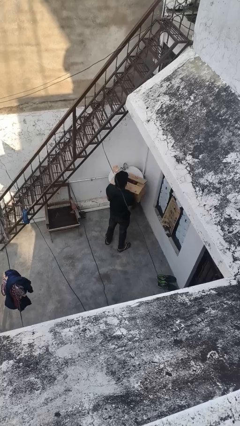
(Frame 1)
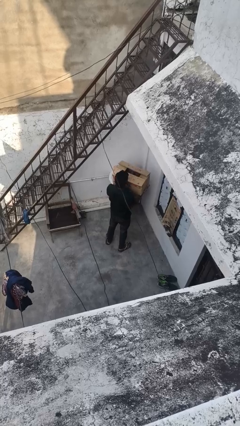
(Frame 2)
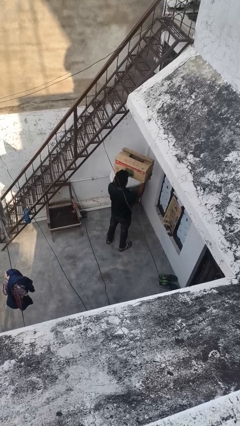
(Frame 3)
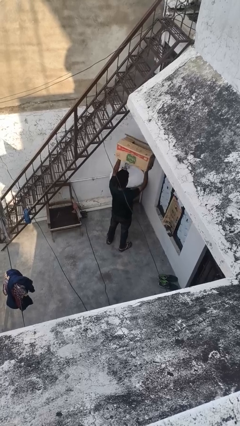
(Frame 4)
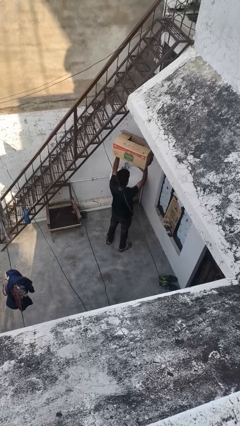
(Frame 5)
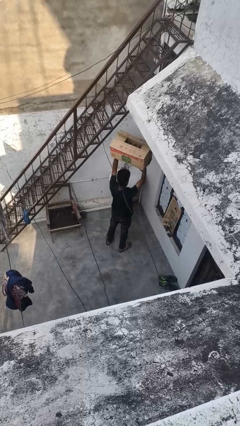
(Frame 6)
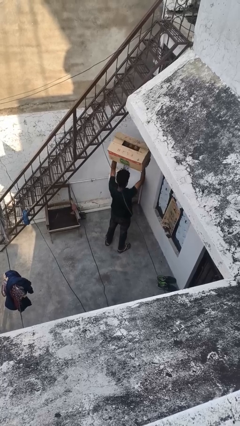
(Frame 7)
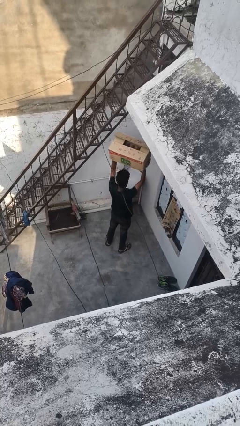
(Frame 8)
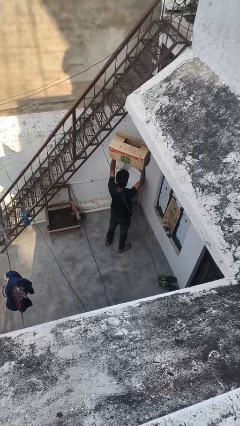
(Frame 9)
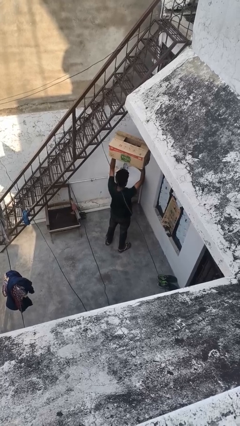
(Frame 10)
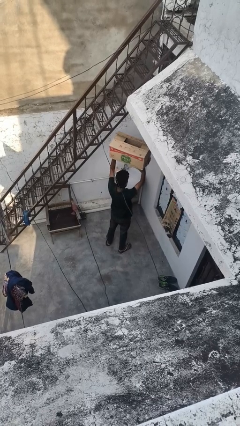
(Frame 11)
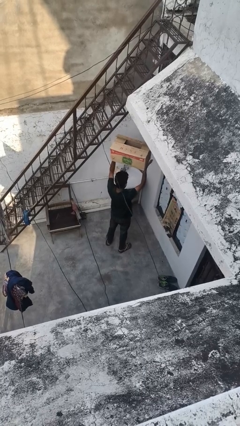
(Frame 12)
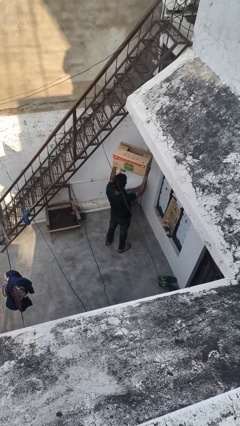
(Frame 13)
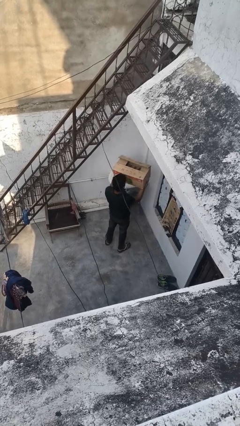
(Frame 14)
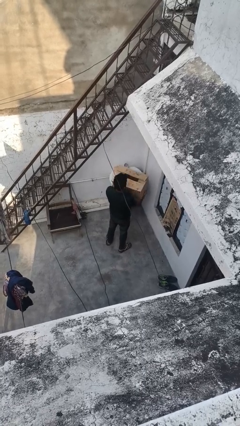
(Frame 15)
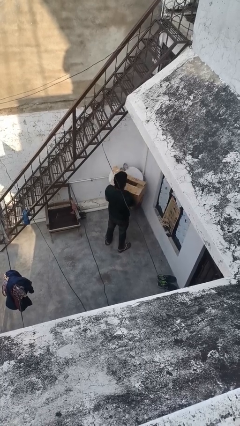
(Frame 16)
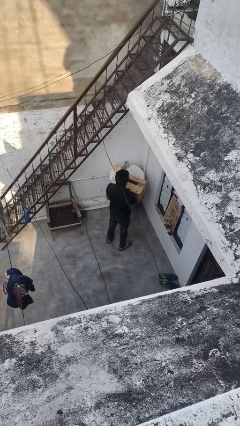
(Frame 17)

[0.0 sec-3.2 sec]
person holds object above head

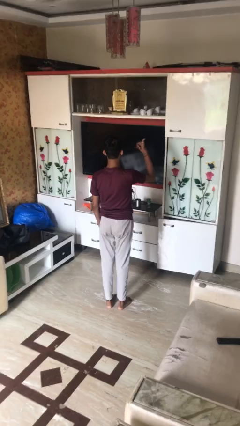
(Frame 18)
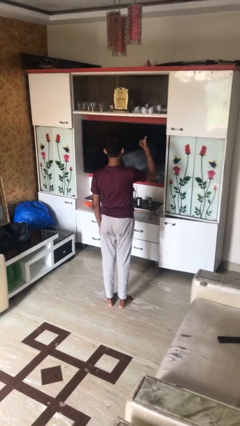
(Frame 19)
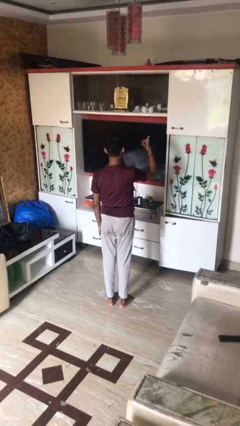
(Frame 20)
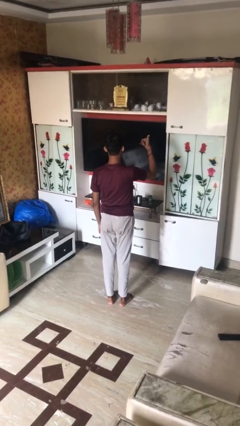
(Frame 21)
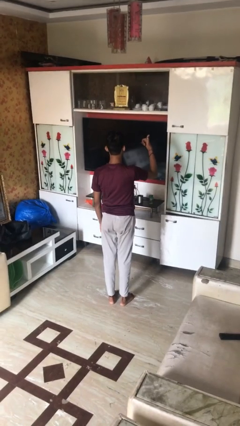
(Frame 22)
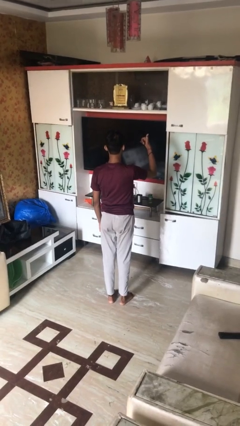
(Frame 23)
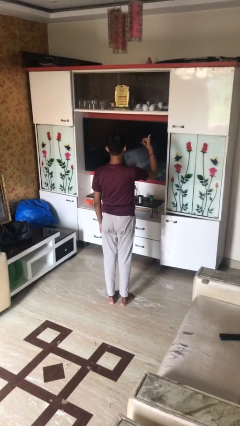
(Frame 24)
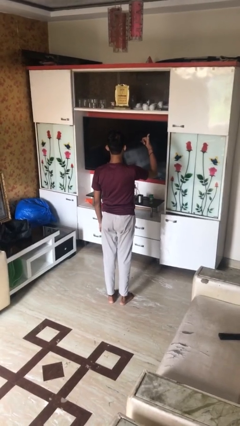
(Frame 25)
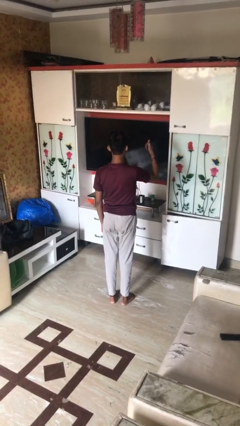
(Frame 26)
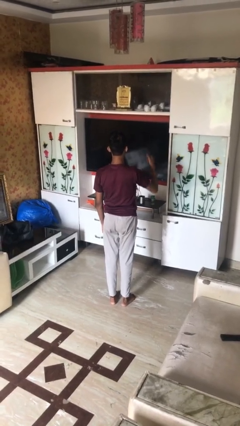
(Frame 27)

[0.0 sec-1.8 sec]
person gestures hang loose

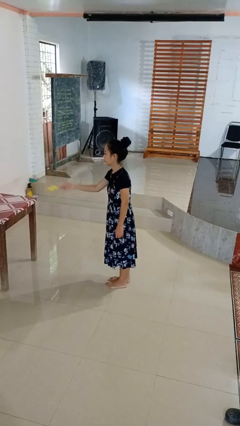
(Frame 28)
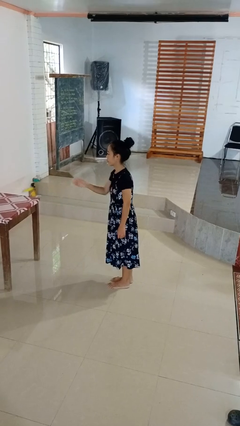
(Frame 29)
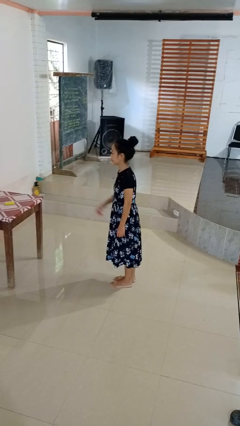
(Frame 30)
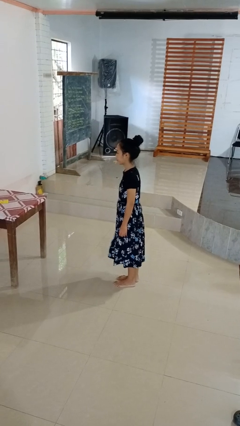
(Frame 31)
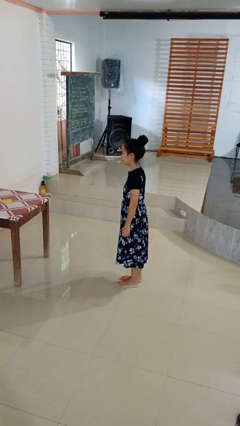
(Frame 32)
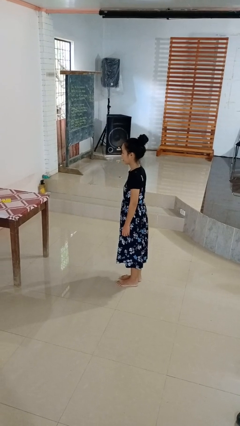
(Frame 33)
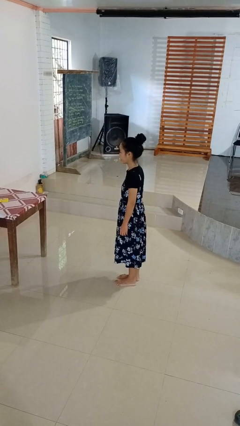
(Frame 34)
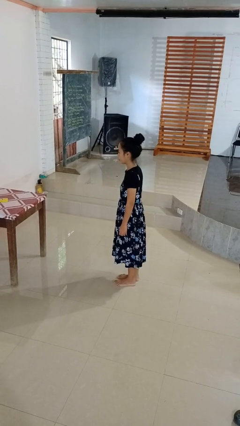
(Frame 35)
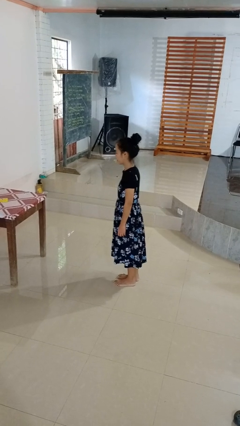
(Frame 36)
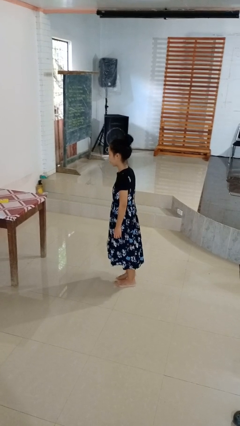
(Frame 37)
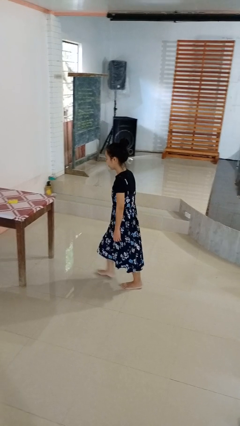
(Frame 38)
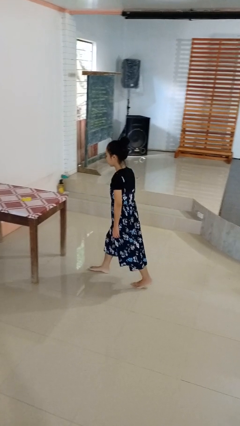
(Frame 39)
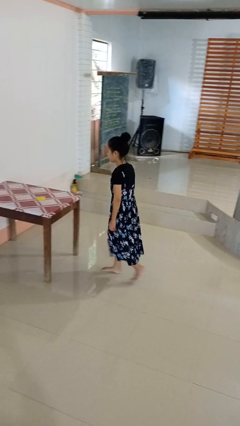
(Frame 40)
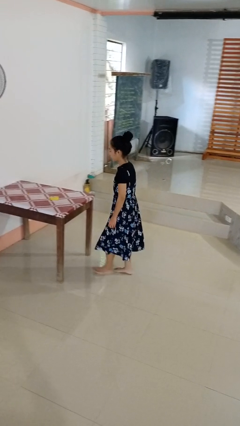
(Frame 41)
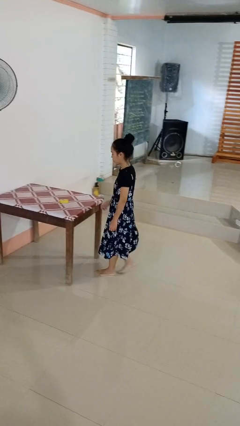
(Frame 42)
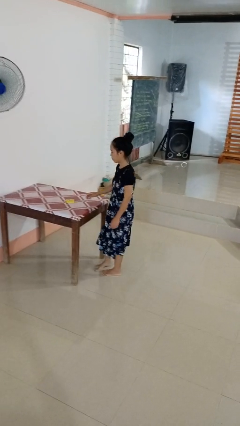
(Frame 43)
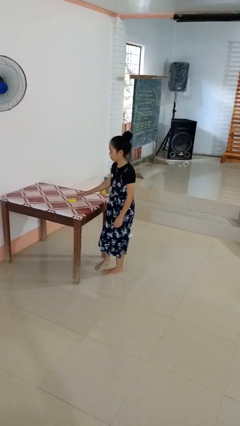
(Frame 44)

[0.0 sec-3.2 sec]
person throws object on table

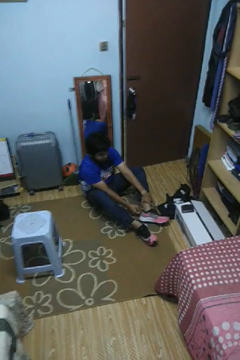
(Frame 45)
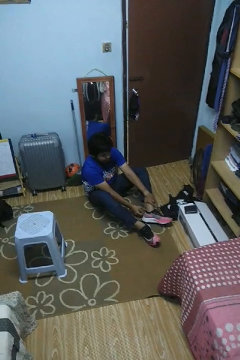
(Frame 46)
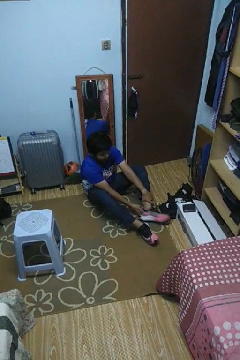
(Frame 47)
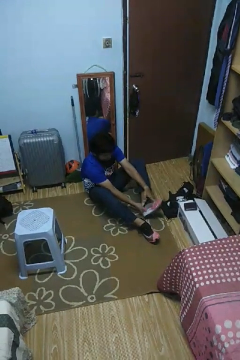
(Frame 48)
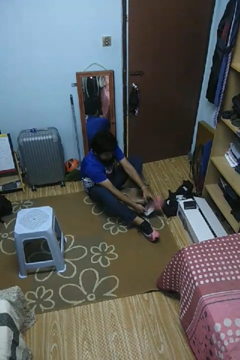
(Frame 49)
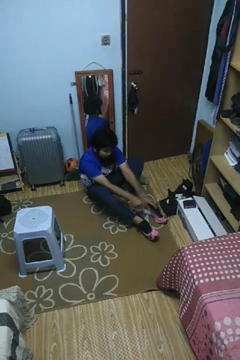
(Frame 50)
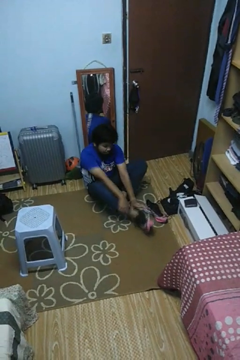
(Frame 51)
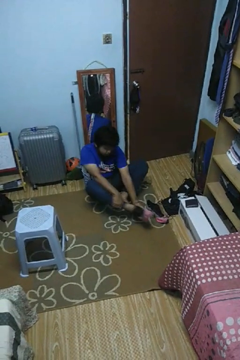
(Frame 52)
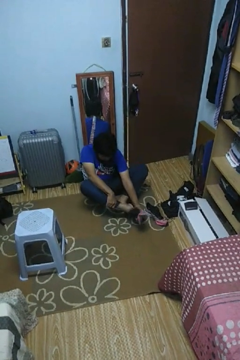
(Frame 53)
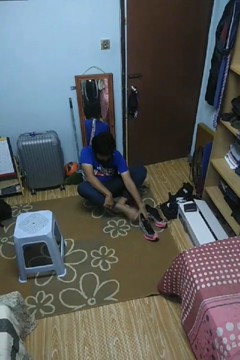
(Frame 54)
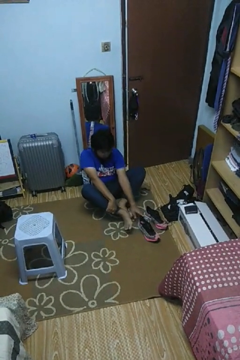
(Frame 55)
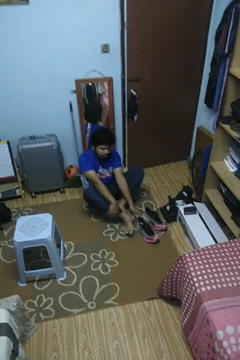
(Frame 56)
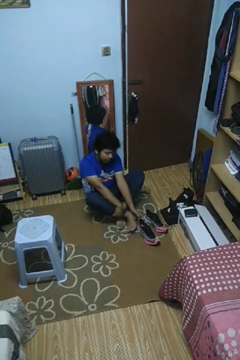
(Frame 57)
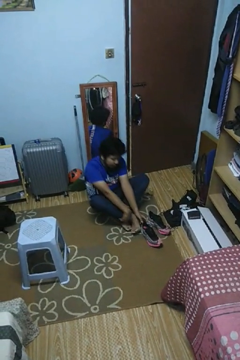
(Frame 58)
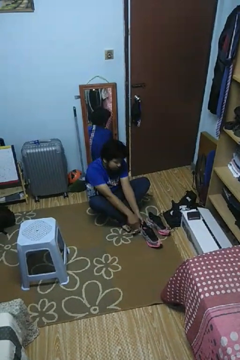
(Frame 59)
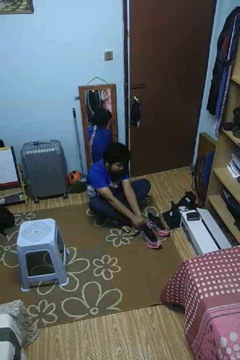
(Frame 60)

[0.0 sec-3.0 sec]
person takes off shoes

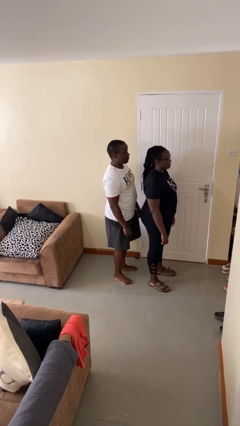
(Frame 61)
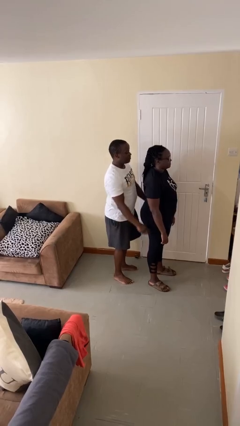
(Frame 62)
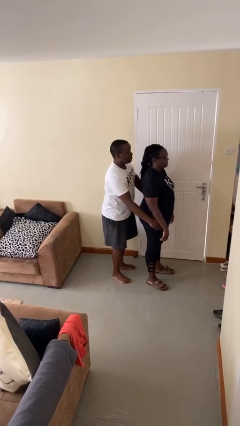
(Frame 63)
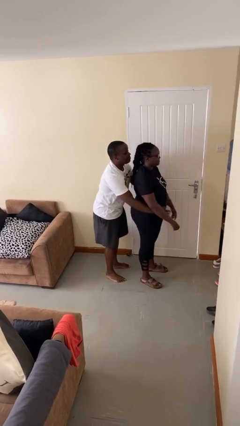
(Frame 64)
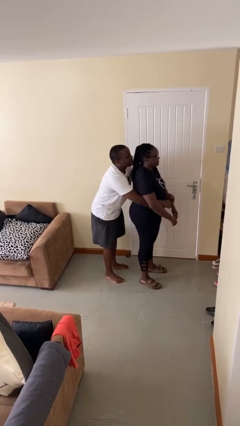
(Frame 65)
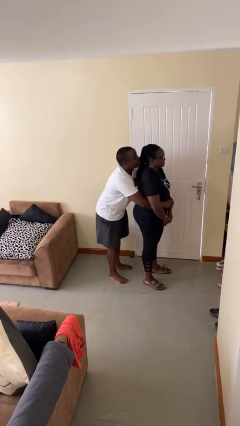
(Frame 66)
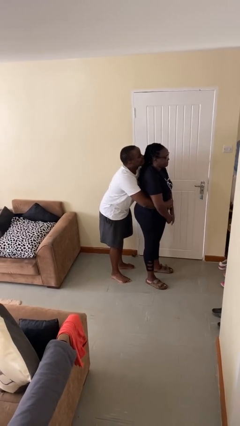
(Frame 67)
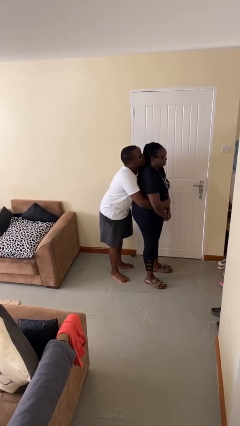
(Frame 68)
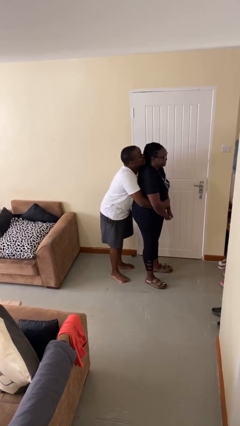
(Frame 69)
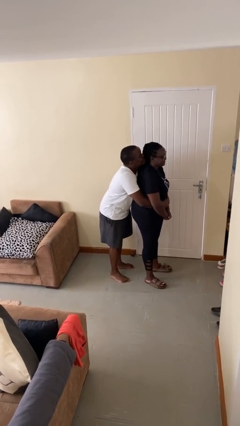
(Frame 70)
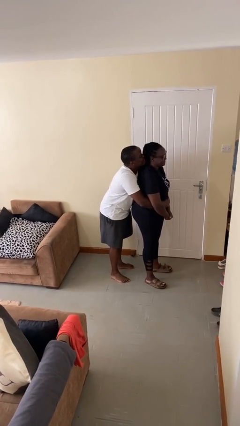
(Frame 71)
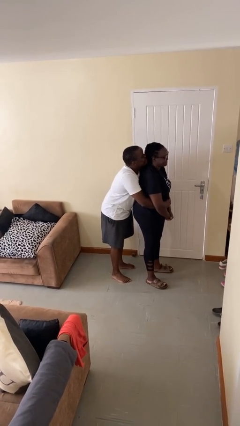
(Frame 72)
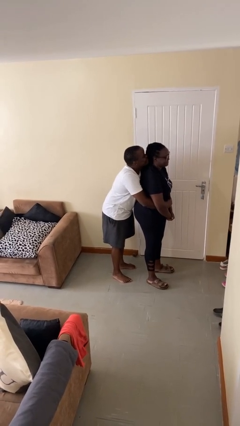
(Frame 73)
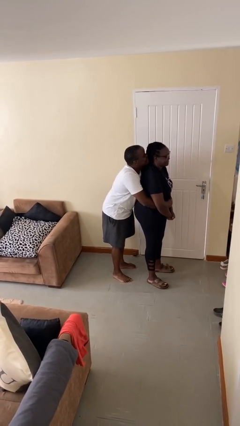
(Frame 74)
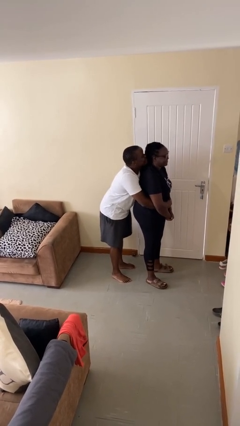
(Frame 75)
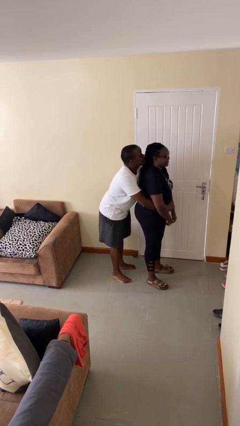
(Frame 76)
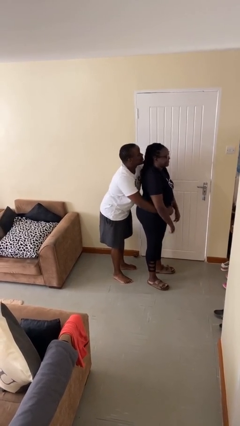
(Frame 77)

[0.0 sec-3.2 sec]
person hugs person from behind

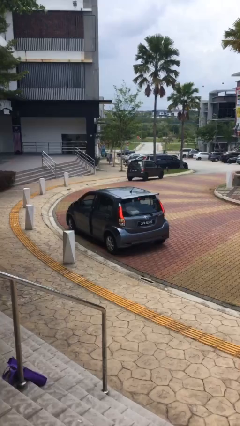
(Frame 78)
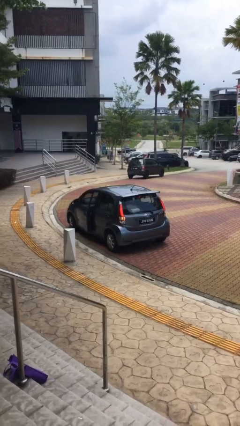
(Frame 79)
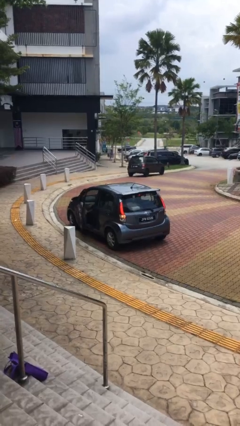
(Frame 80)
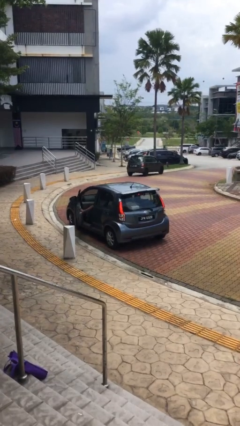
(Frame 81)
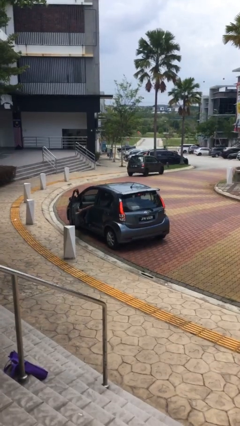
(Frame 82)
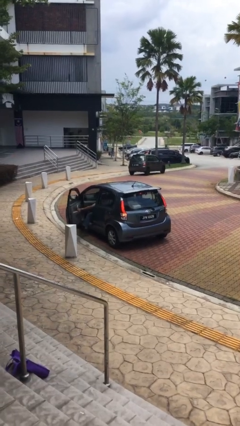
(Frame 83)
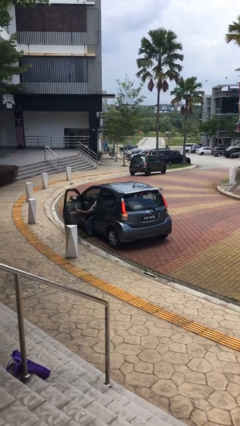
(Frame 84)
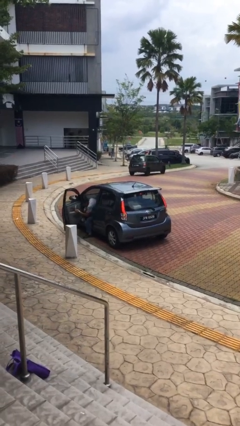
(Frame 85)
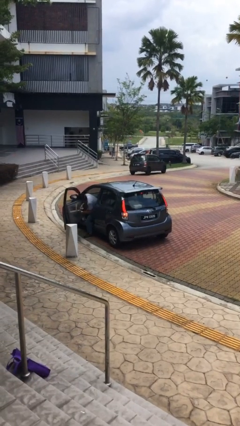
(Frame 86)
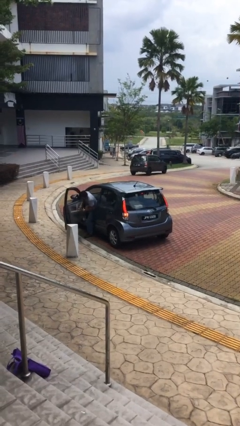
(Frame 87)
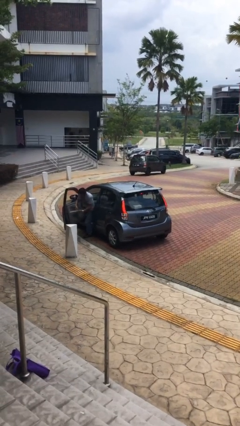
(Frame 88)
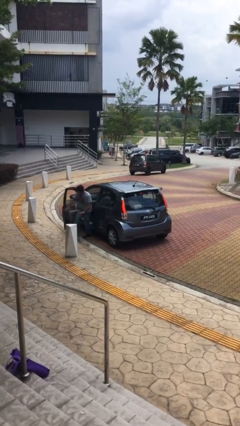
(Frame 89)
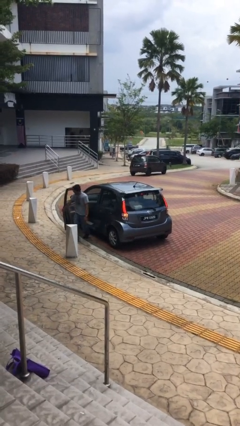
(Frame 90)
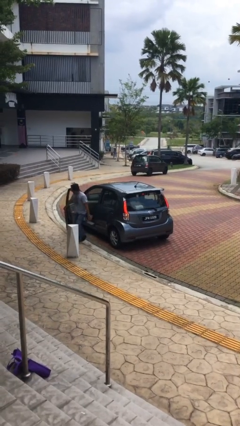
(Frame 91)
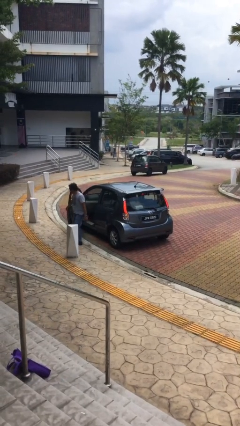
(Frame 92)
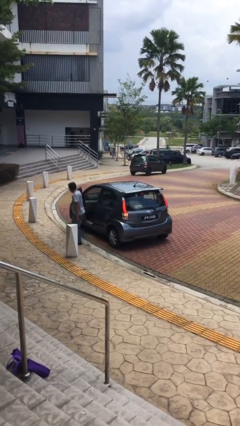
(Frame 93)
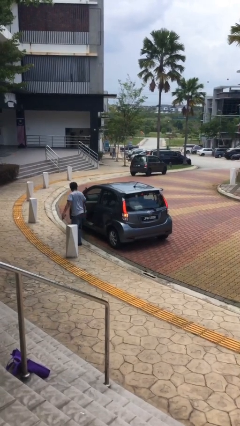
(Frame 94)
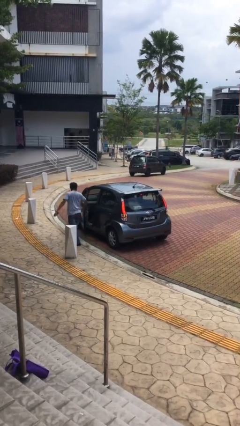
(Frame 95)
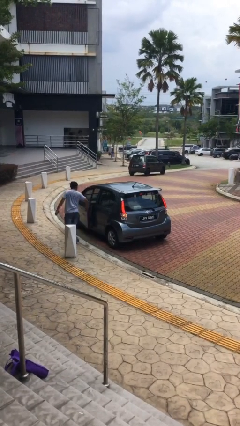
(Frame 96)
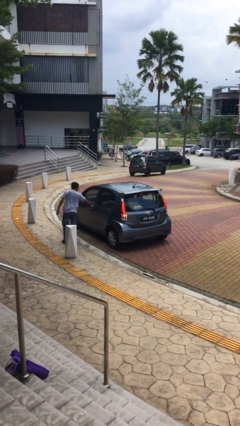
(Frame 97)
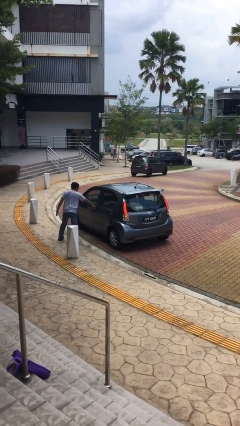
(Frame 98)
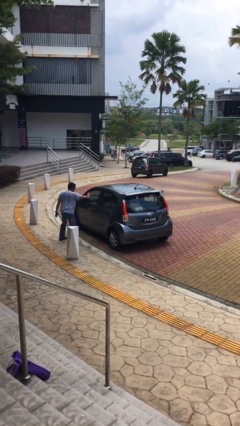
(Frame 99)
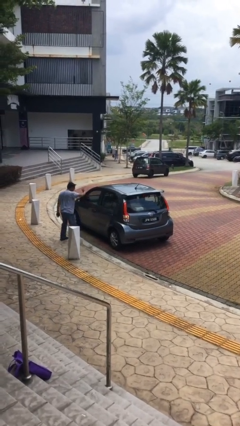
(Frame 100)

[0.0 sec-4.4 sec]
car drops off person
